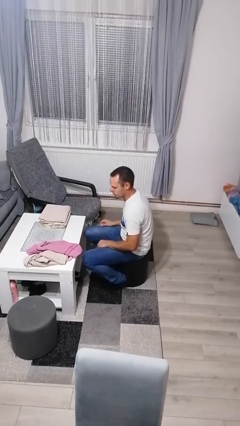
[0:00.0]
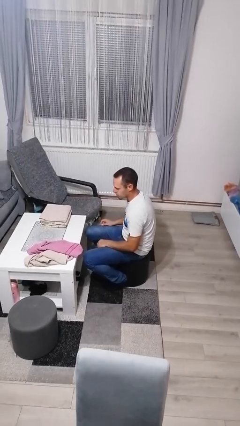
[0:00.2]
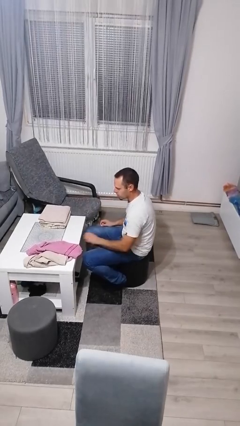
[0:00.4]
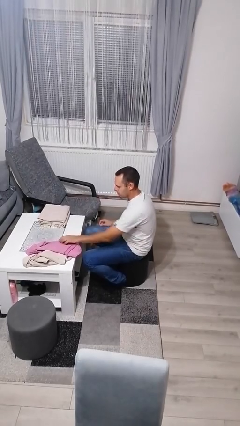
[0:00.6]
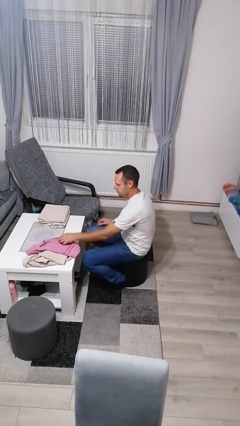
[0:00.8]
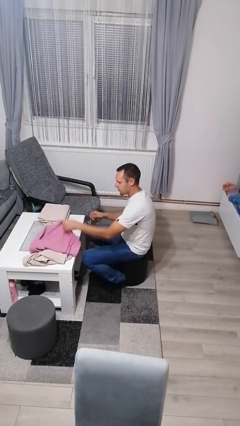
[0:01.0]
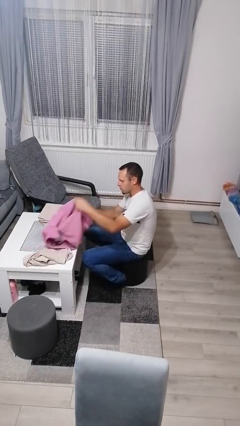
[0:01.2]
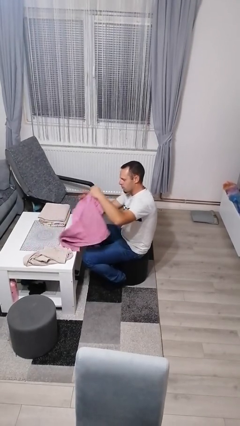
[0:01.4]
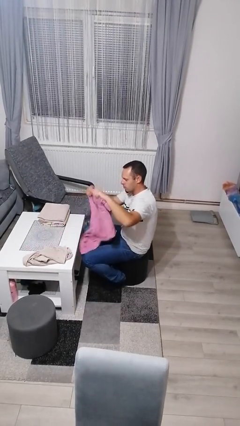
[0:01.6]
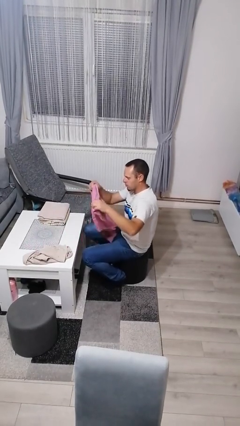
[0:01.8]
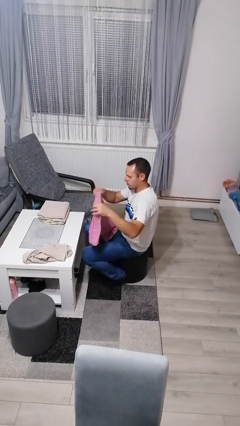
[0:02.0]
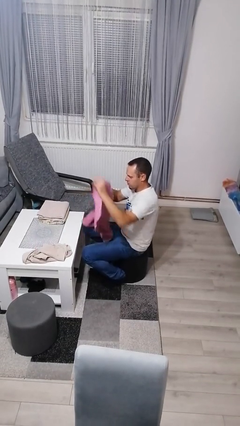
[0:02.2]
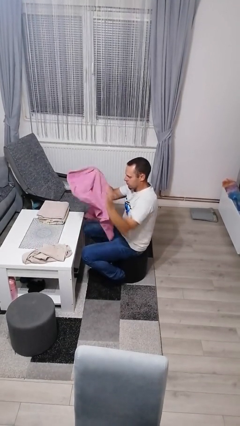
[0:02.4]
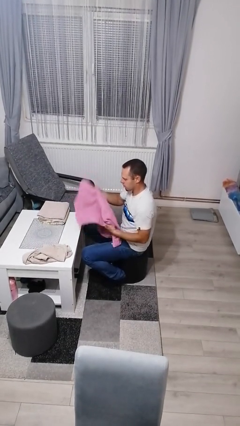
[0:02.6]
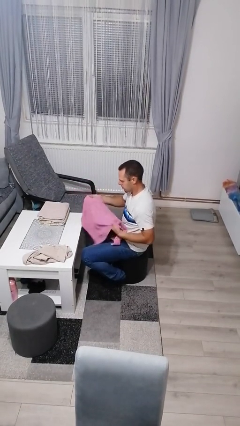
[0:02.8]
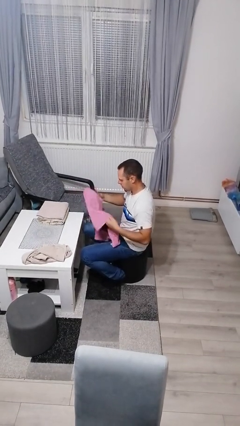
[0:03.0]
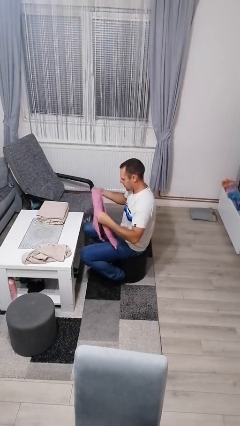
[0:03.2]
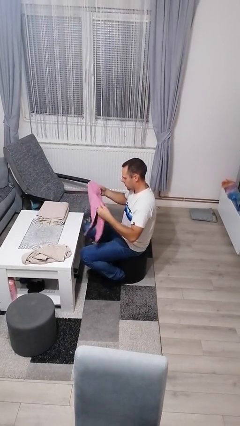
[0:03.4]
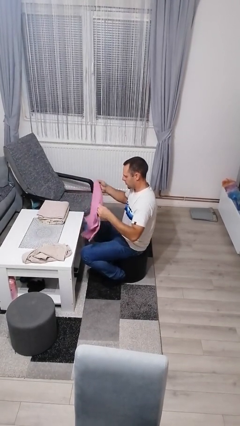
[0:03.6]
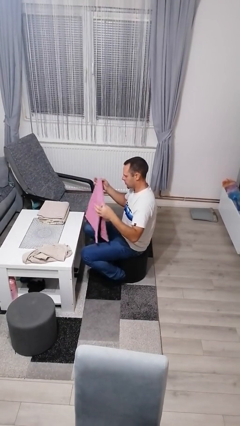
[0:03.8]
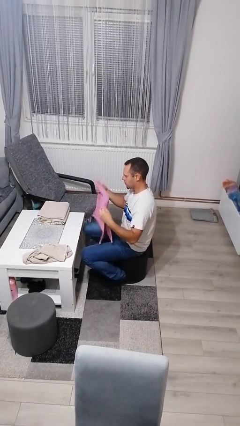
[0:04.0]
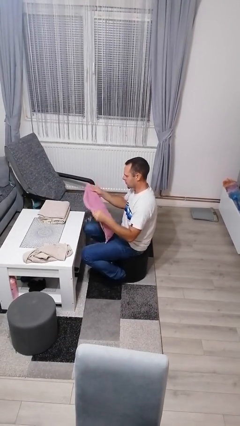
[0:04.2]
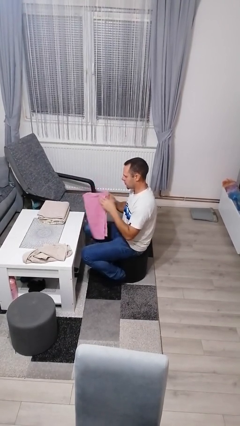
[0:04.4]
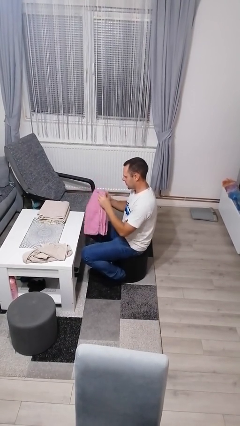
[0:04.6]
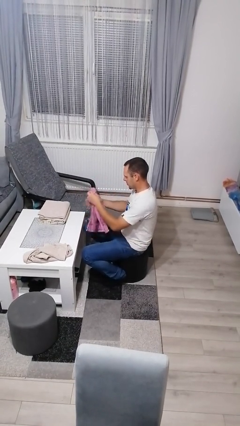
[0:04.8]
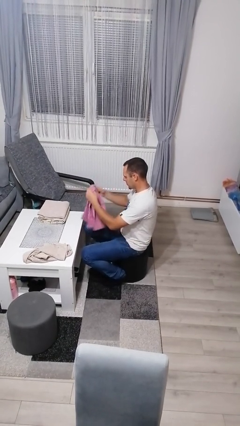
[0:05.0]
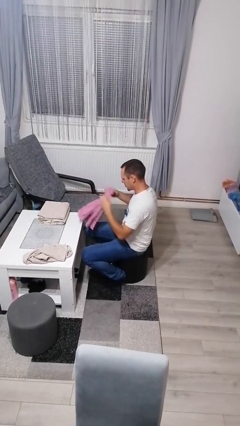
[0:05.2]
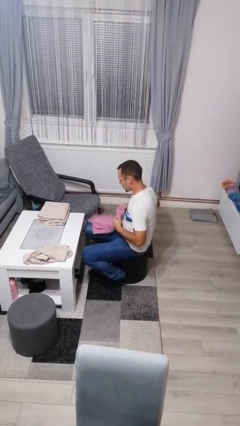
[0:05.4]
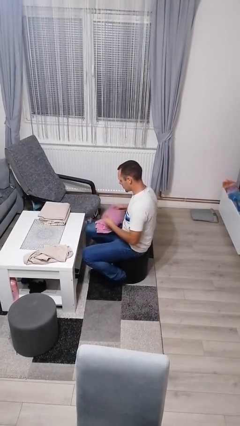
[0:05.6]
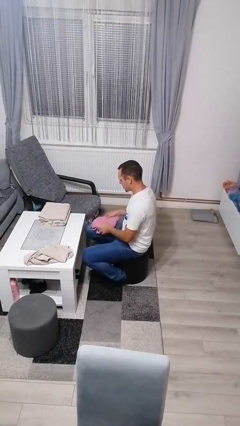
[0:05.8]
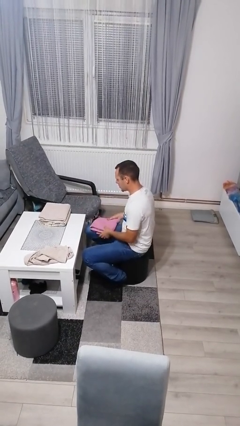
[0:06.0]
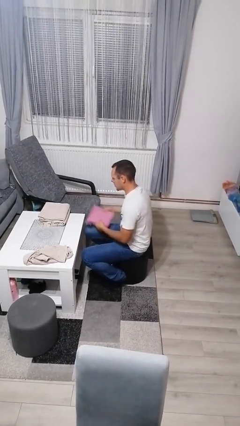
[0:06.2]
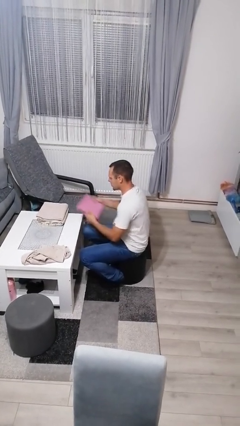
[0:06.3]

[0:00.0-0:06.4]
person folds towel

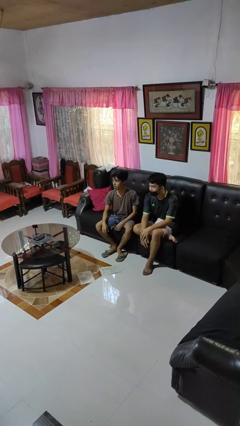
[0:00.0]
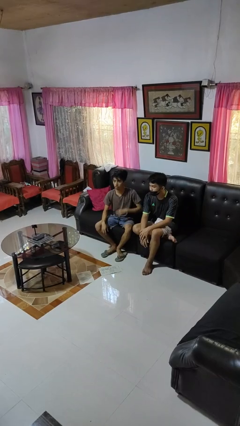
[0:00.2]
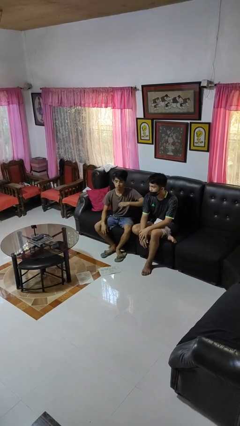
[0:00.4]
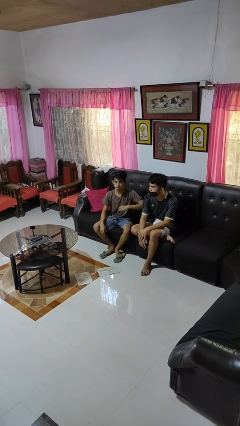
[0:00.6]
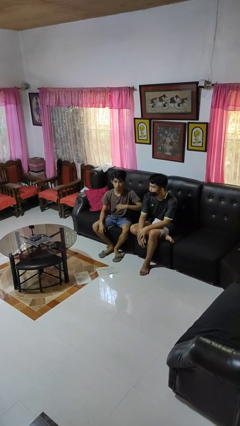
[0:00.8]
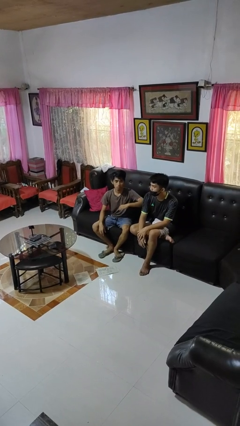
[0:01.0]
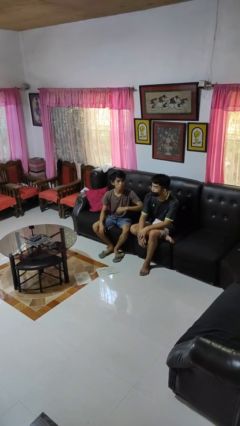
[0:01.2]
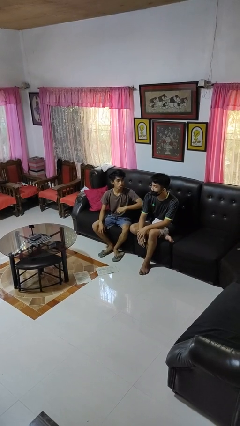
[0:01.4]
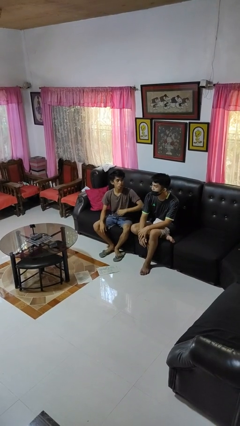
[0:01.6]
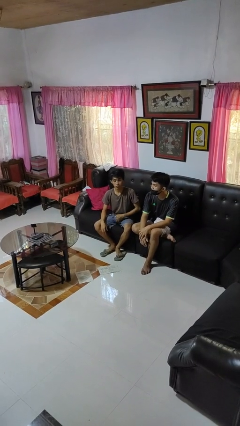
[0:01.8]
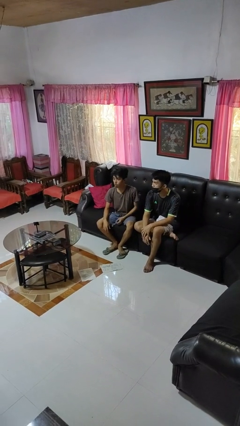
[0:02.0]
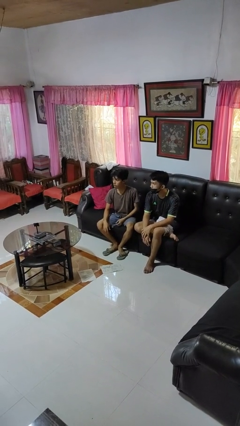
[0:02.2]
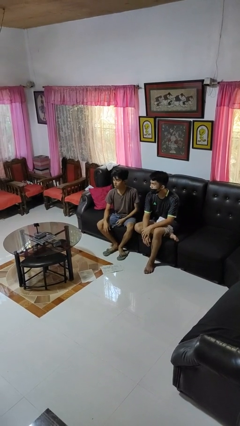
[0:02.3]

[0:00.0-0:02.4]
person nudges person with elbow

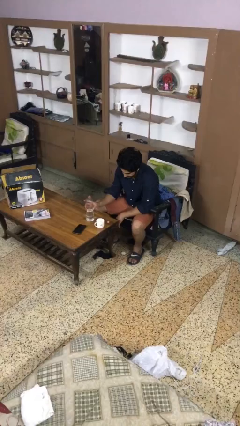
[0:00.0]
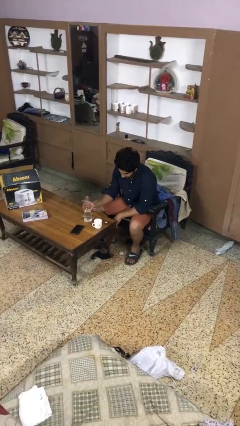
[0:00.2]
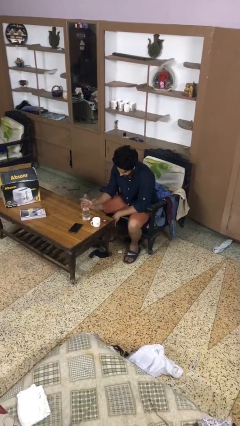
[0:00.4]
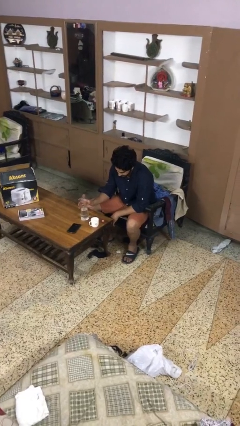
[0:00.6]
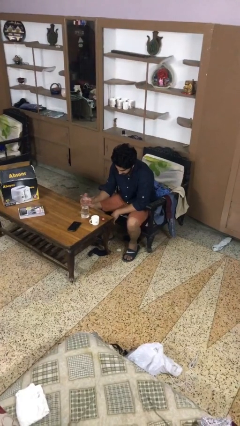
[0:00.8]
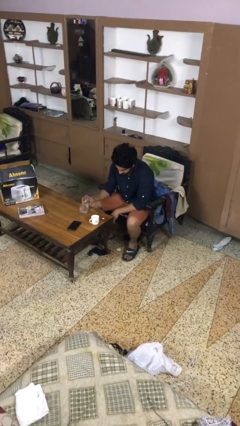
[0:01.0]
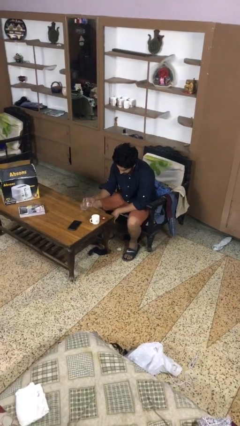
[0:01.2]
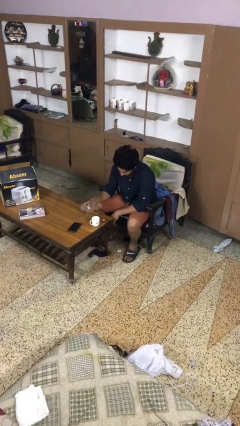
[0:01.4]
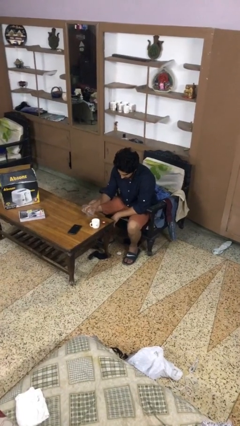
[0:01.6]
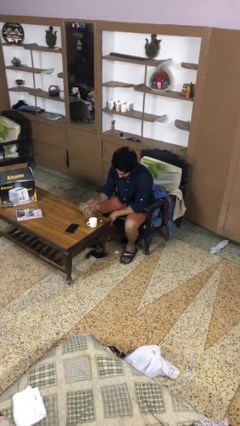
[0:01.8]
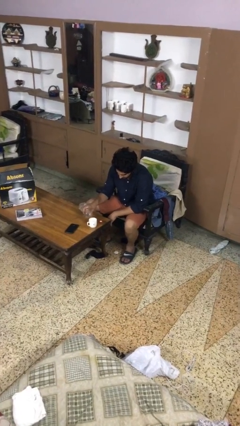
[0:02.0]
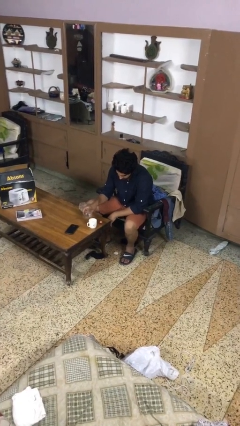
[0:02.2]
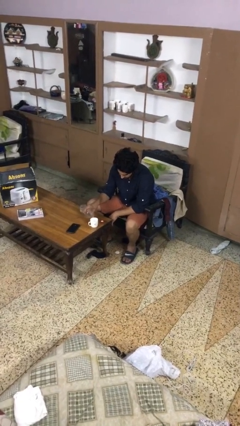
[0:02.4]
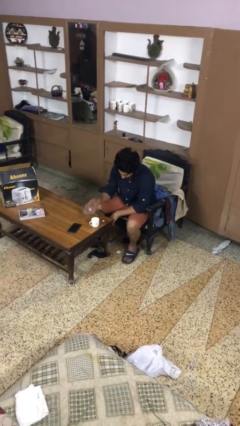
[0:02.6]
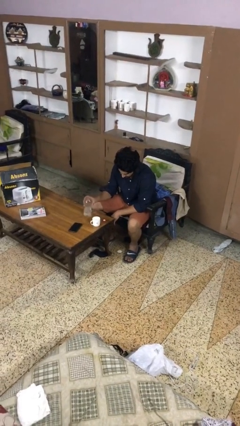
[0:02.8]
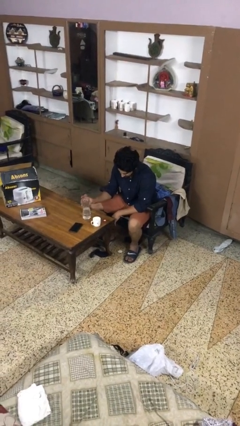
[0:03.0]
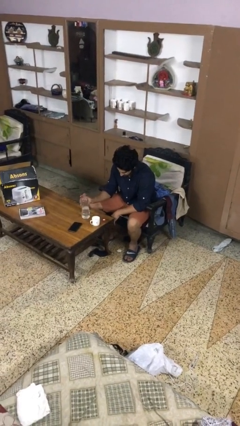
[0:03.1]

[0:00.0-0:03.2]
person pours liquid into cup

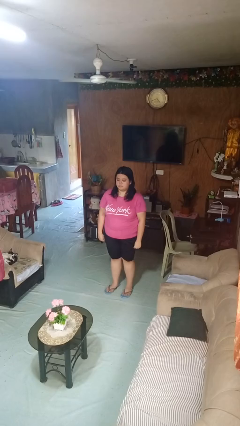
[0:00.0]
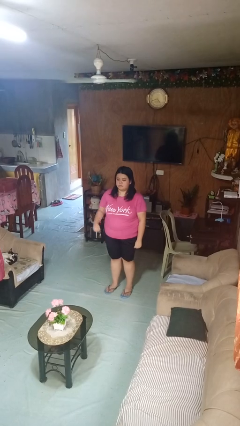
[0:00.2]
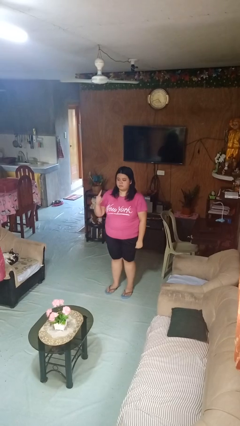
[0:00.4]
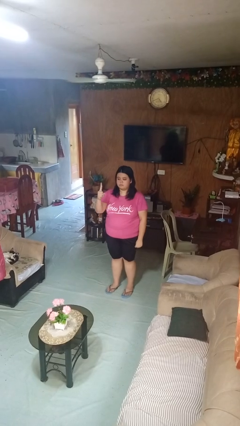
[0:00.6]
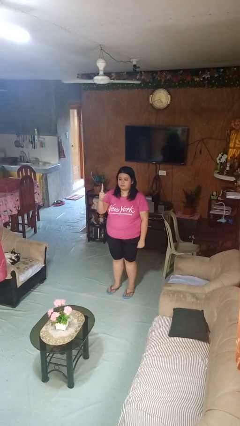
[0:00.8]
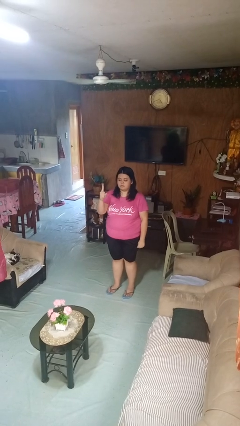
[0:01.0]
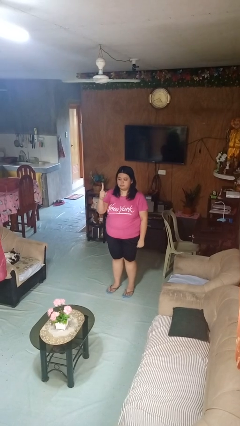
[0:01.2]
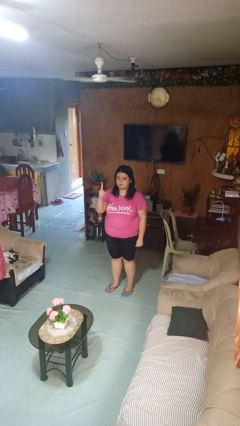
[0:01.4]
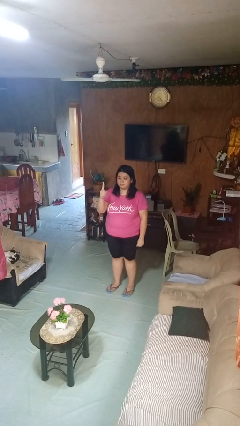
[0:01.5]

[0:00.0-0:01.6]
person gestures number one

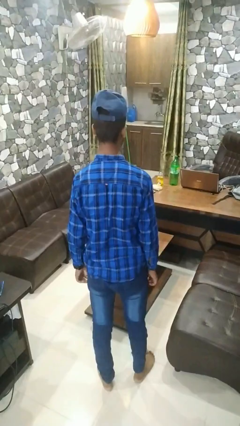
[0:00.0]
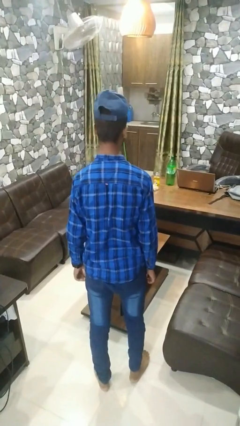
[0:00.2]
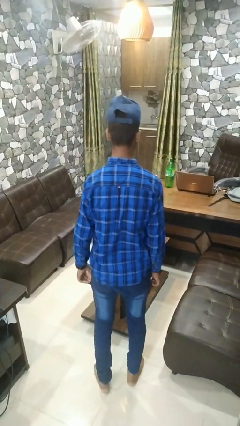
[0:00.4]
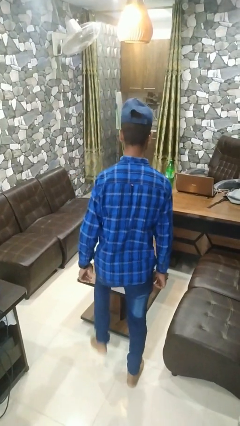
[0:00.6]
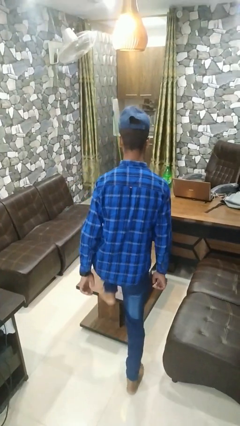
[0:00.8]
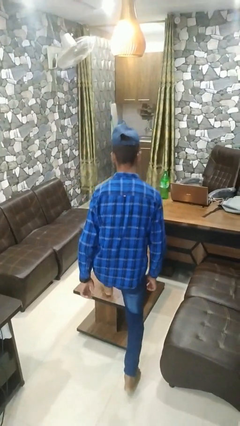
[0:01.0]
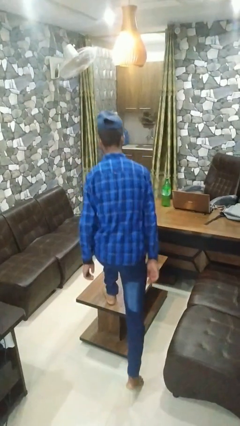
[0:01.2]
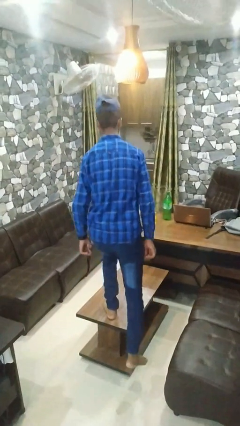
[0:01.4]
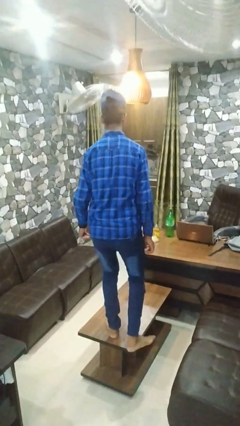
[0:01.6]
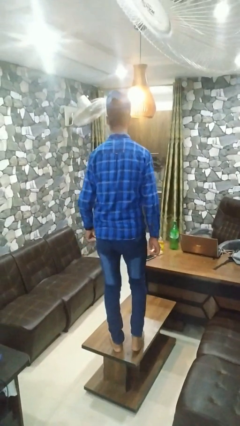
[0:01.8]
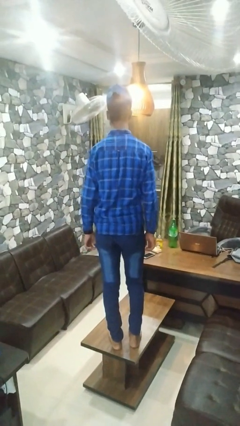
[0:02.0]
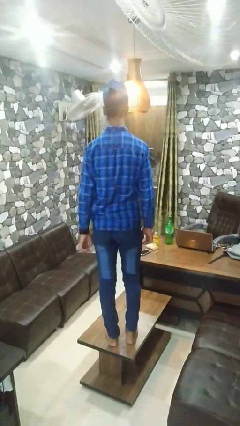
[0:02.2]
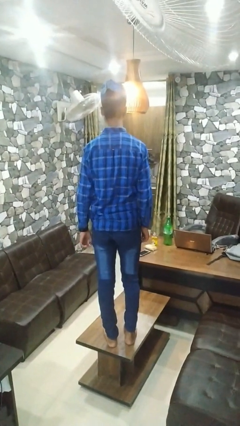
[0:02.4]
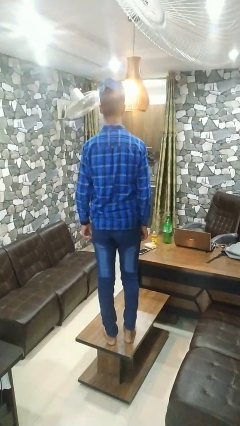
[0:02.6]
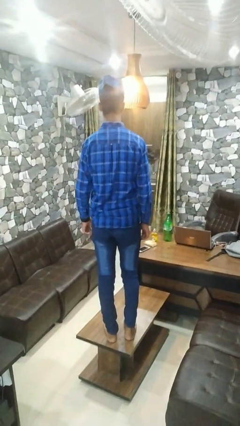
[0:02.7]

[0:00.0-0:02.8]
person climbs on table

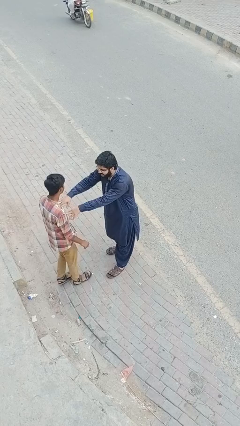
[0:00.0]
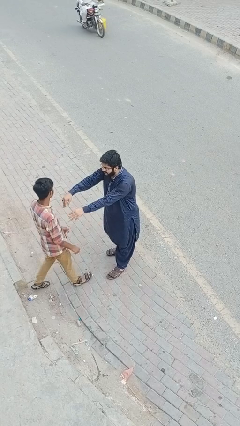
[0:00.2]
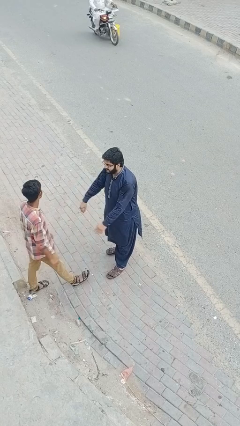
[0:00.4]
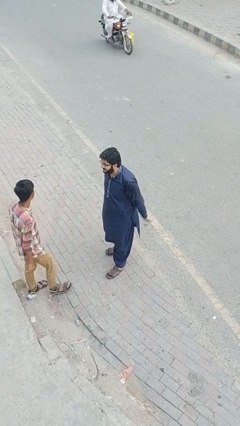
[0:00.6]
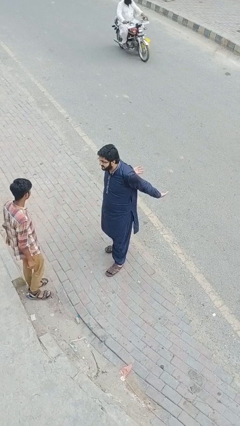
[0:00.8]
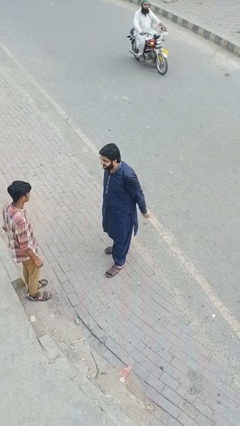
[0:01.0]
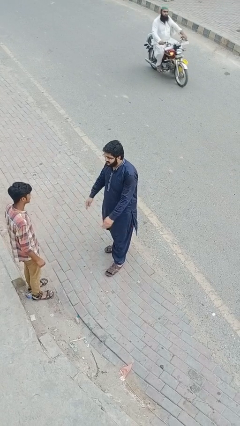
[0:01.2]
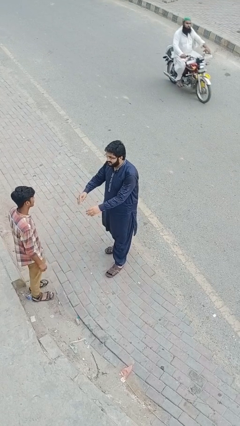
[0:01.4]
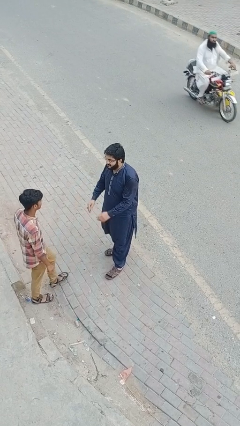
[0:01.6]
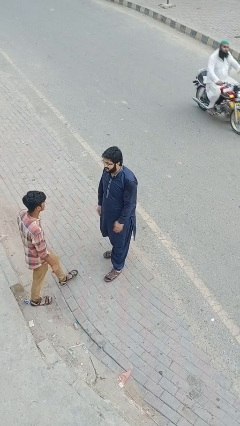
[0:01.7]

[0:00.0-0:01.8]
person shoves person
